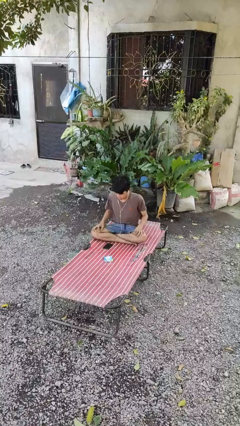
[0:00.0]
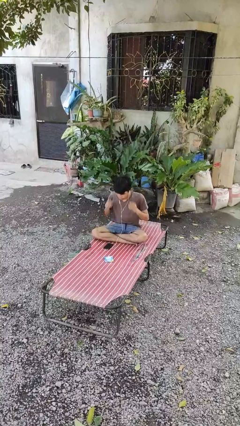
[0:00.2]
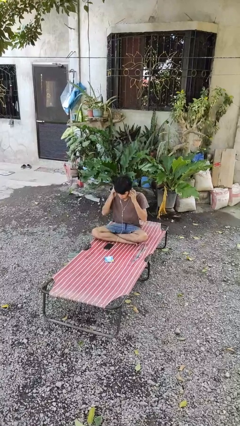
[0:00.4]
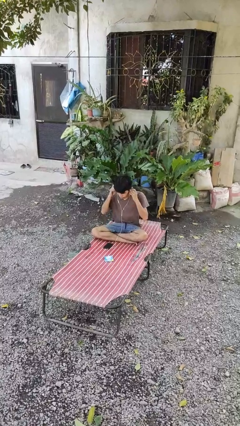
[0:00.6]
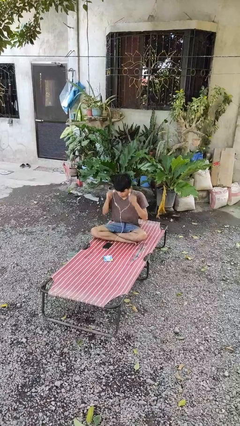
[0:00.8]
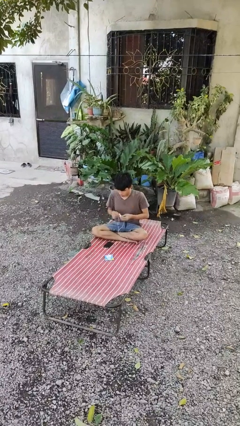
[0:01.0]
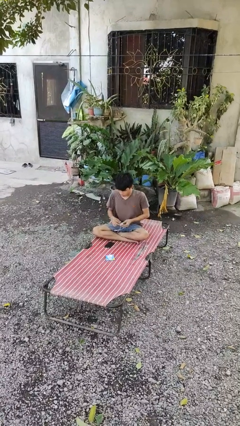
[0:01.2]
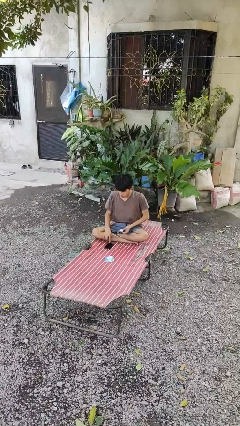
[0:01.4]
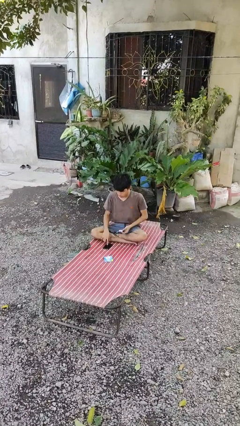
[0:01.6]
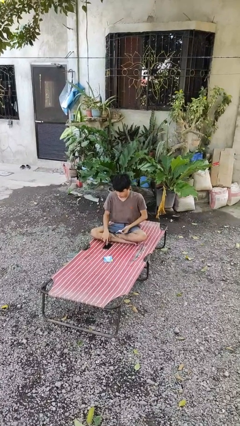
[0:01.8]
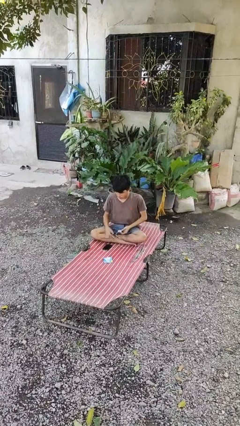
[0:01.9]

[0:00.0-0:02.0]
person takes off headphones

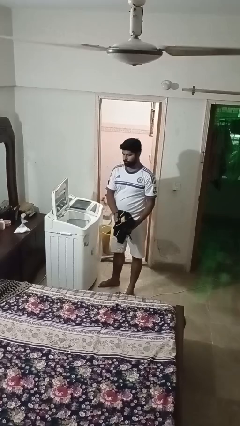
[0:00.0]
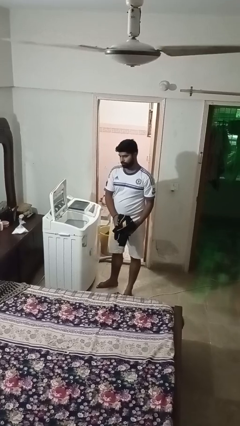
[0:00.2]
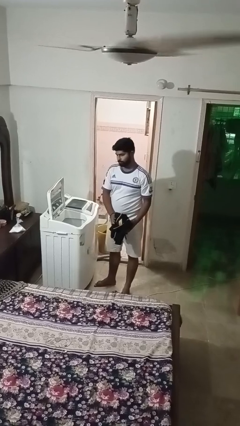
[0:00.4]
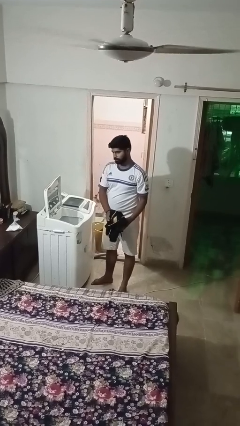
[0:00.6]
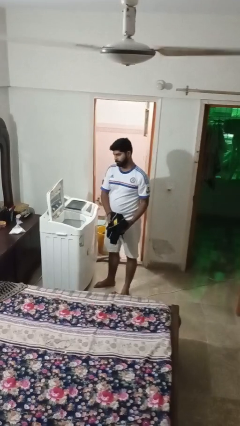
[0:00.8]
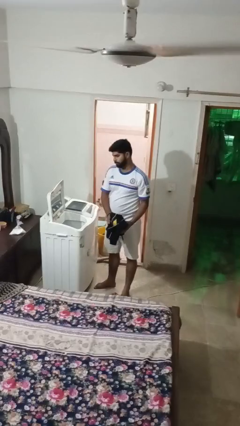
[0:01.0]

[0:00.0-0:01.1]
person unloads clotheswasher

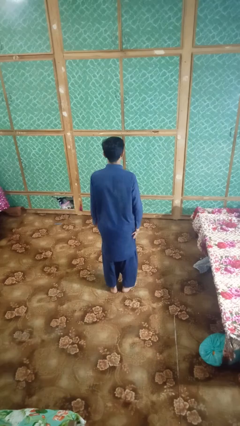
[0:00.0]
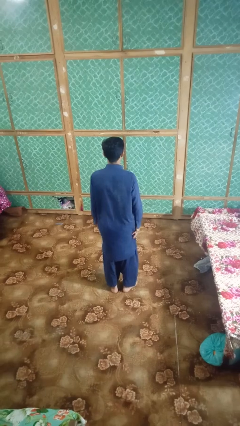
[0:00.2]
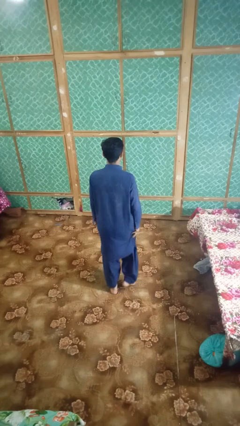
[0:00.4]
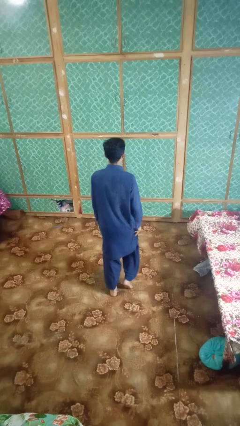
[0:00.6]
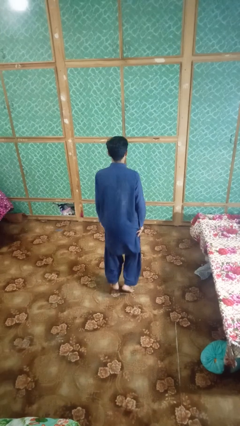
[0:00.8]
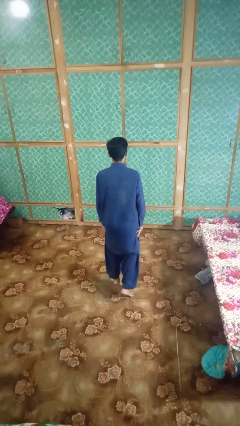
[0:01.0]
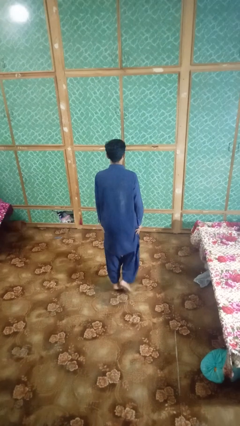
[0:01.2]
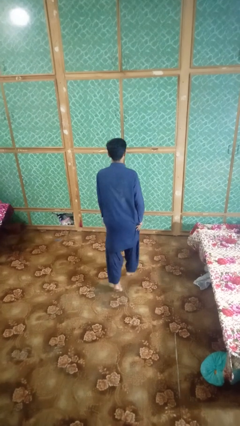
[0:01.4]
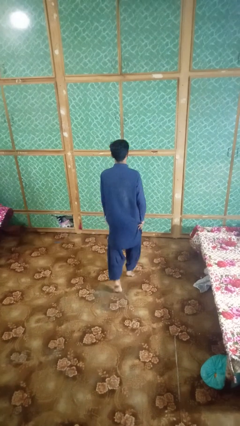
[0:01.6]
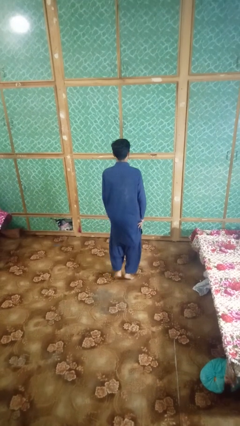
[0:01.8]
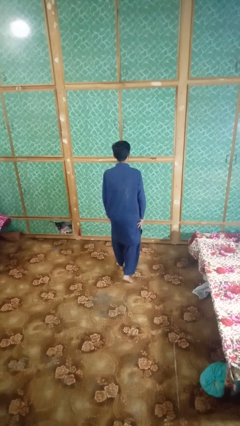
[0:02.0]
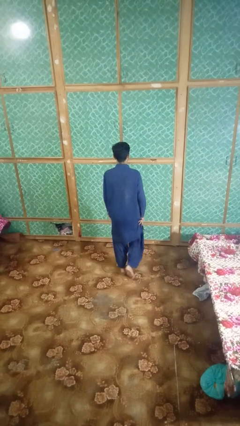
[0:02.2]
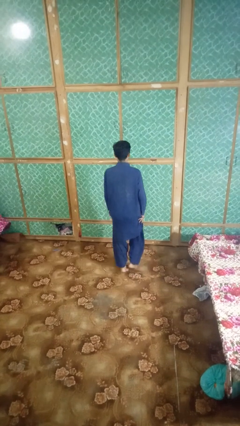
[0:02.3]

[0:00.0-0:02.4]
person walks tiptoe

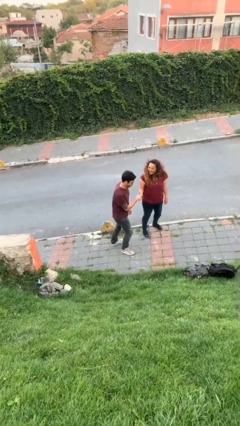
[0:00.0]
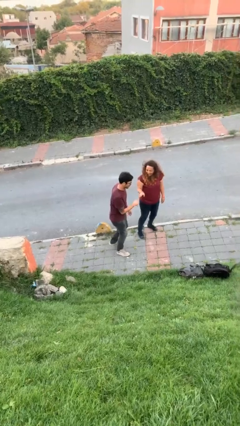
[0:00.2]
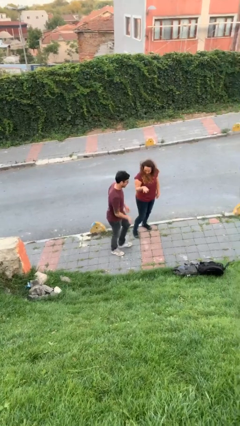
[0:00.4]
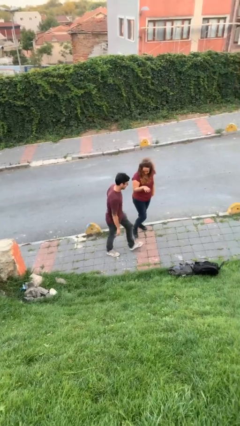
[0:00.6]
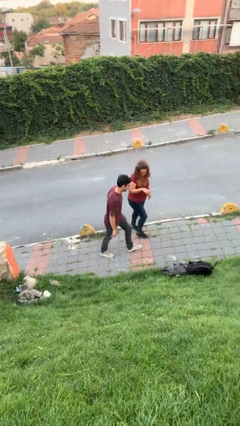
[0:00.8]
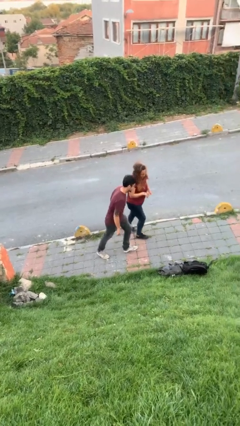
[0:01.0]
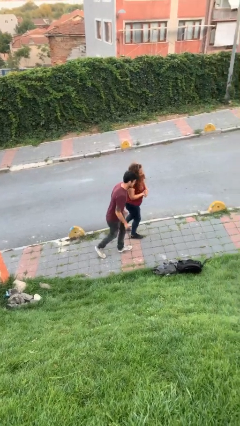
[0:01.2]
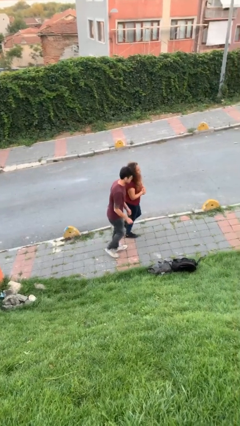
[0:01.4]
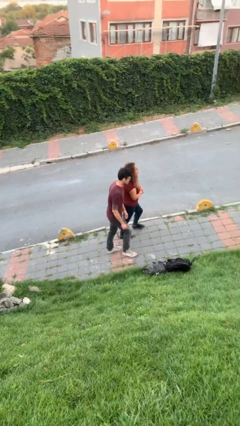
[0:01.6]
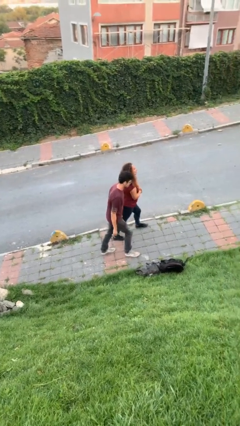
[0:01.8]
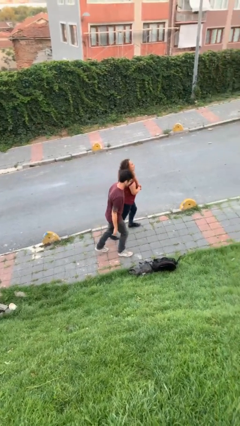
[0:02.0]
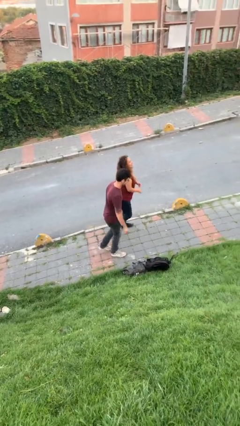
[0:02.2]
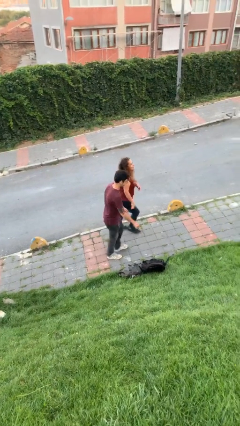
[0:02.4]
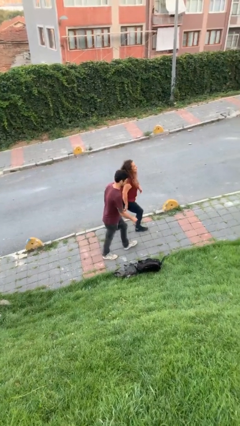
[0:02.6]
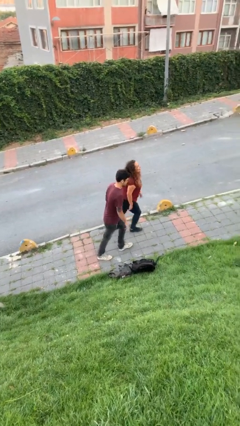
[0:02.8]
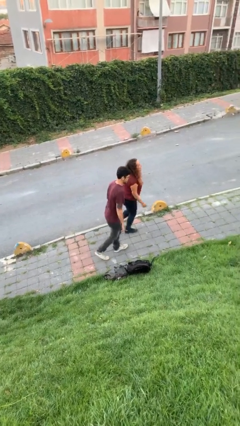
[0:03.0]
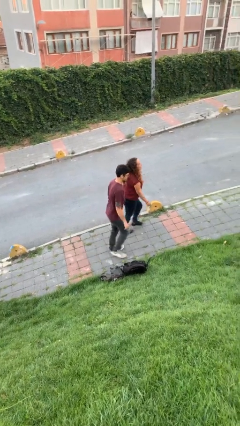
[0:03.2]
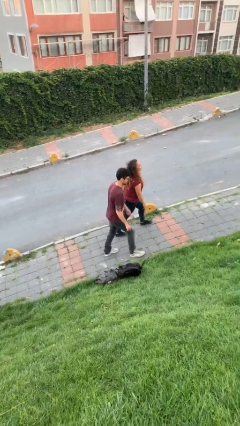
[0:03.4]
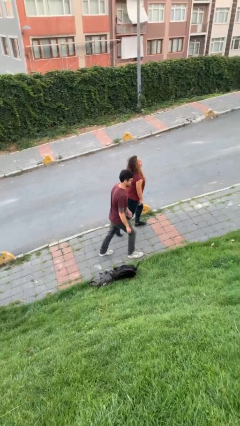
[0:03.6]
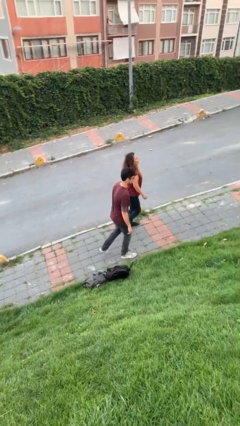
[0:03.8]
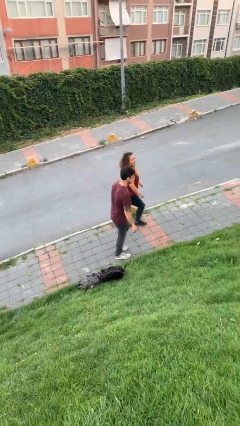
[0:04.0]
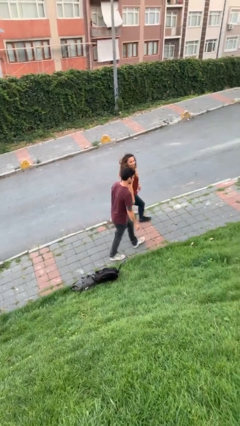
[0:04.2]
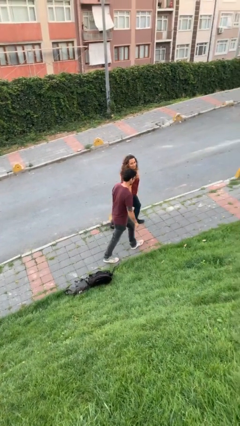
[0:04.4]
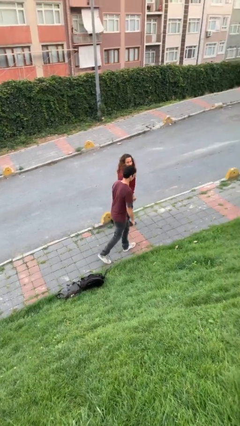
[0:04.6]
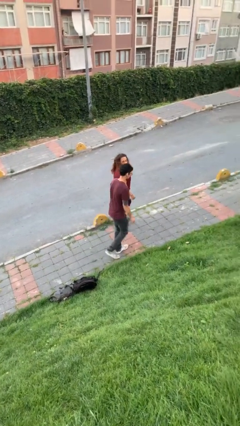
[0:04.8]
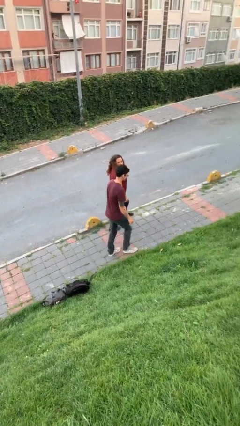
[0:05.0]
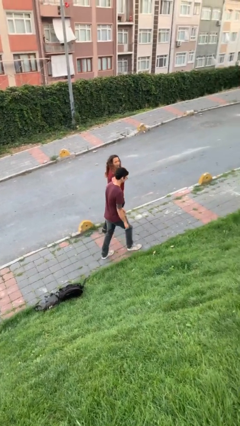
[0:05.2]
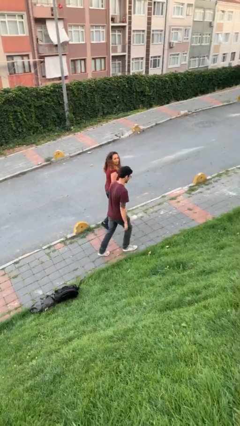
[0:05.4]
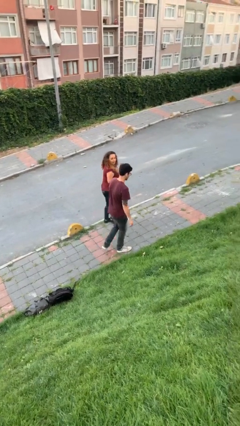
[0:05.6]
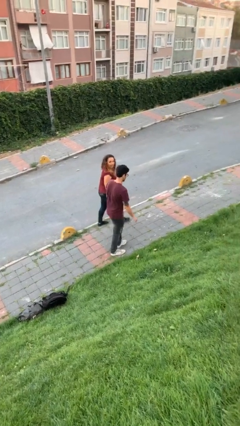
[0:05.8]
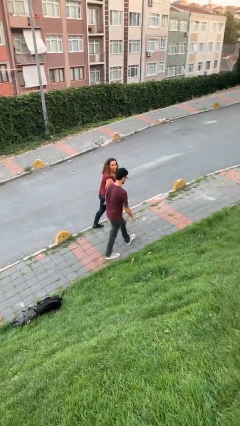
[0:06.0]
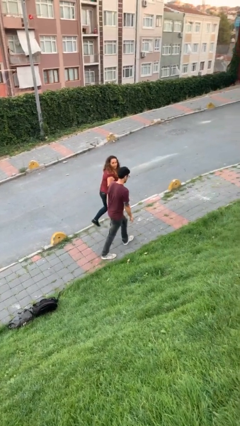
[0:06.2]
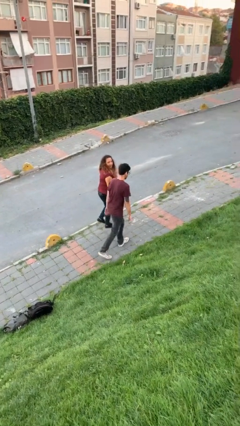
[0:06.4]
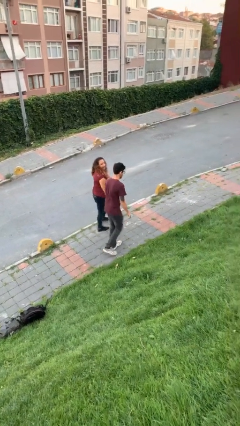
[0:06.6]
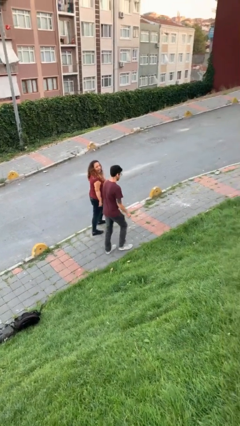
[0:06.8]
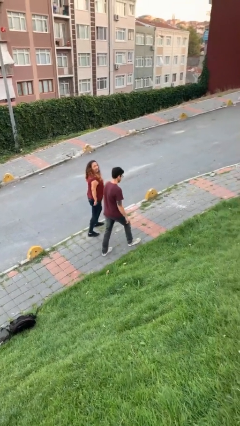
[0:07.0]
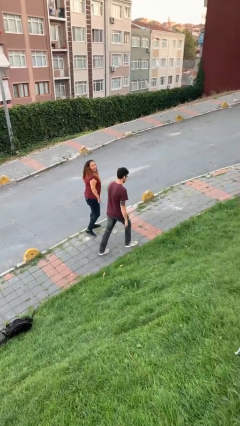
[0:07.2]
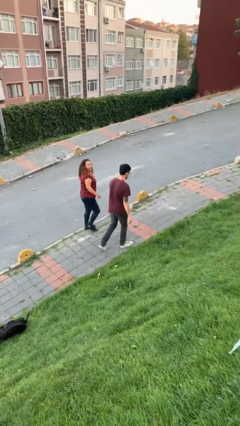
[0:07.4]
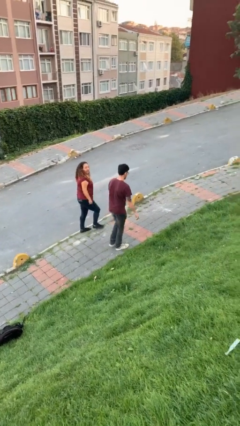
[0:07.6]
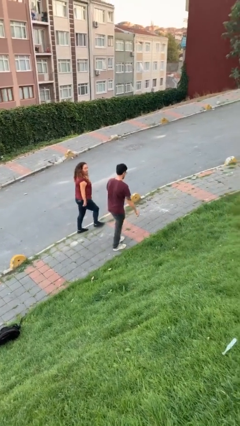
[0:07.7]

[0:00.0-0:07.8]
person talks to person

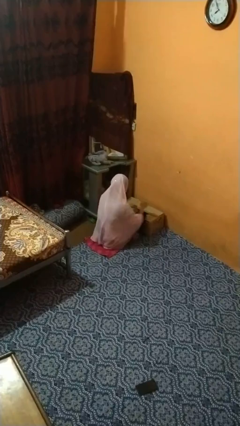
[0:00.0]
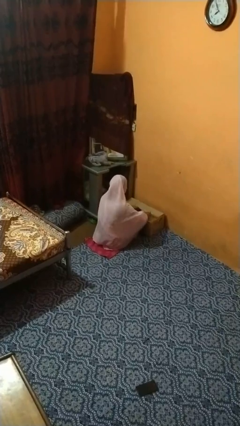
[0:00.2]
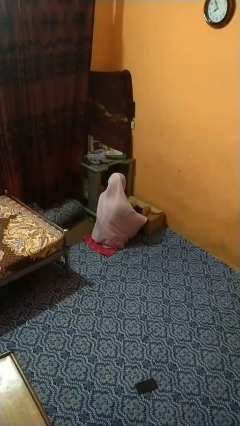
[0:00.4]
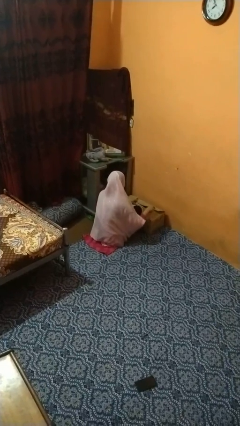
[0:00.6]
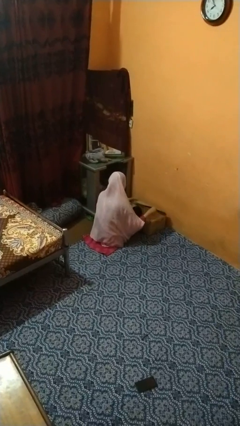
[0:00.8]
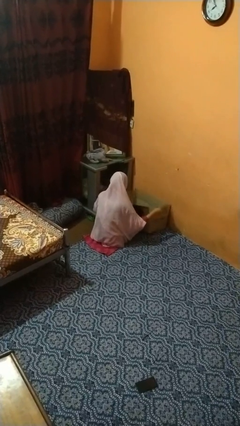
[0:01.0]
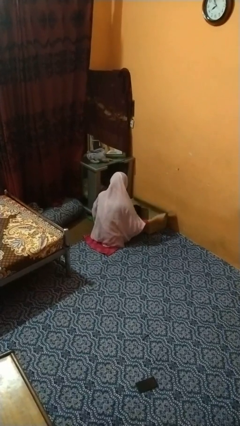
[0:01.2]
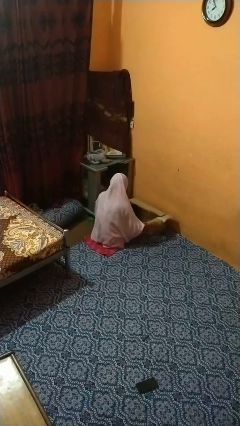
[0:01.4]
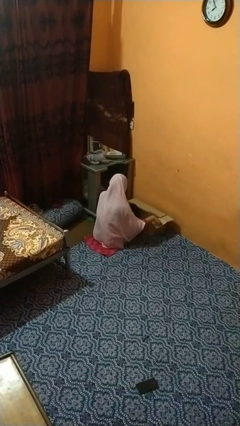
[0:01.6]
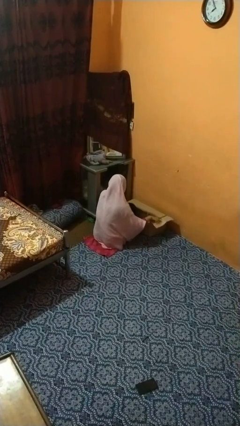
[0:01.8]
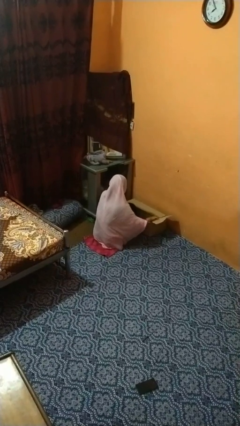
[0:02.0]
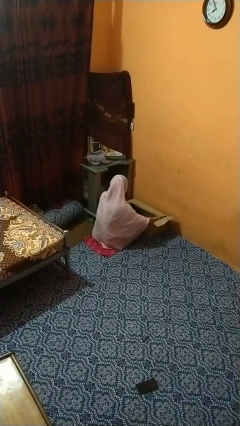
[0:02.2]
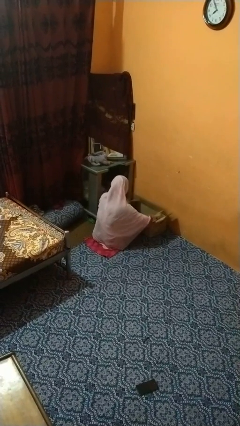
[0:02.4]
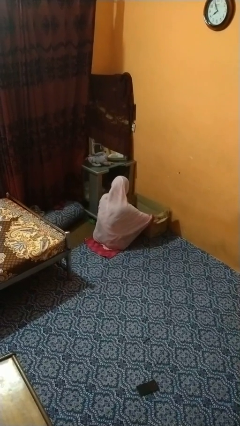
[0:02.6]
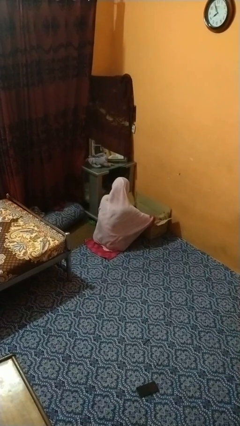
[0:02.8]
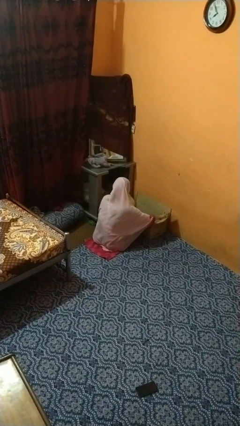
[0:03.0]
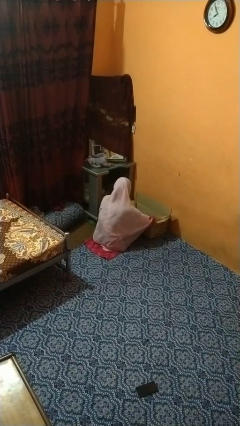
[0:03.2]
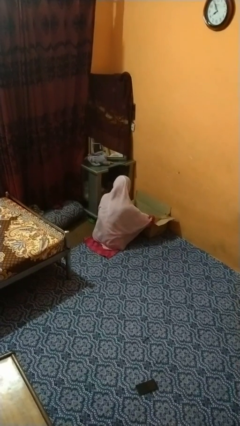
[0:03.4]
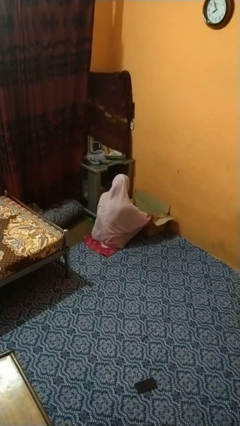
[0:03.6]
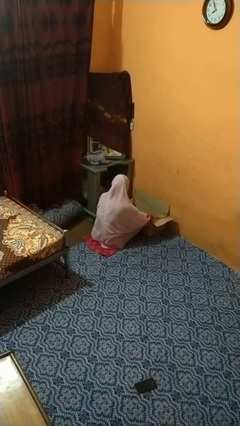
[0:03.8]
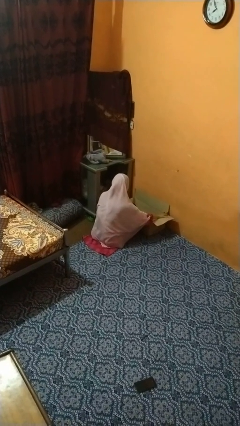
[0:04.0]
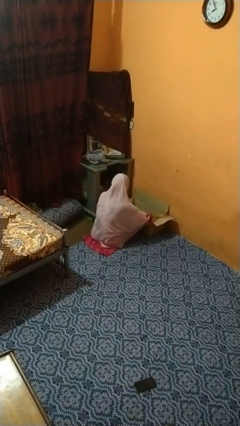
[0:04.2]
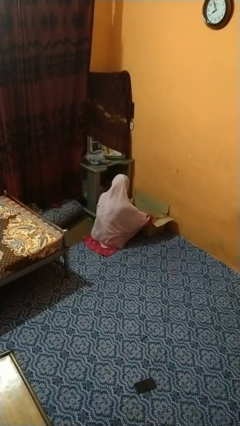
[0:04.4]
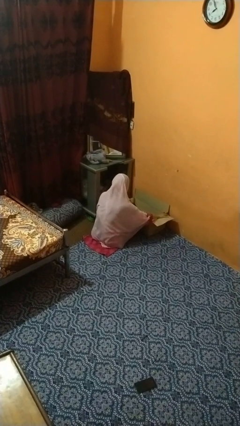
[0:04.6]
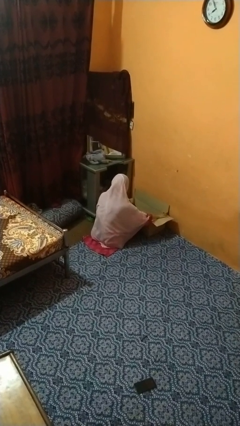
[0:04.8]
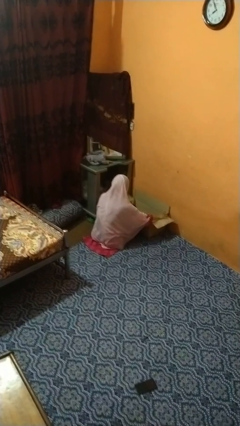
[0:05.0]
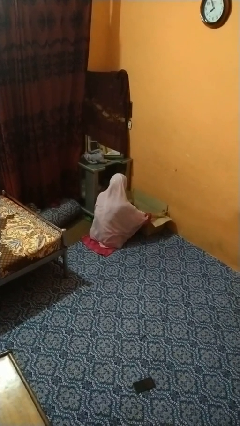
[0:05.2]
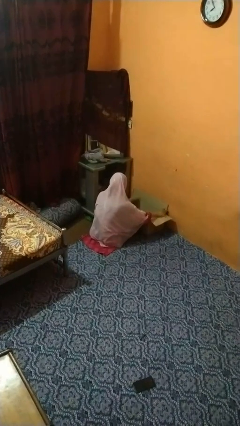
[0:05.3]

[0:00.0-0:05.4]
person opens box
